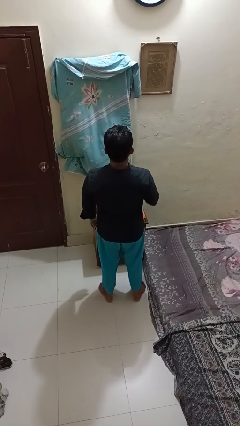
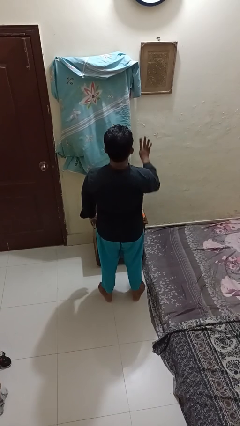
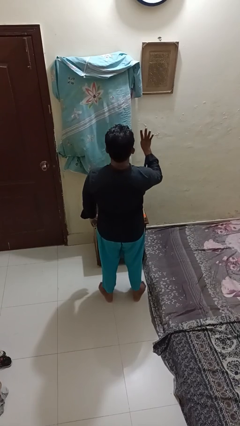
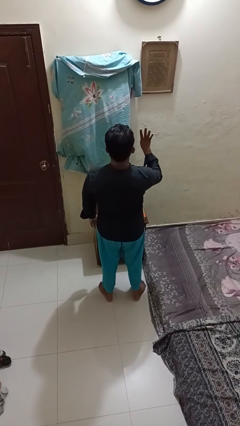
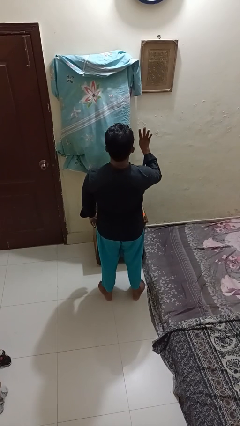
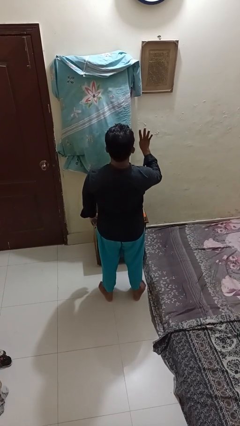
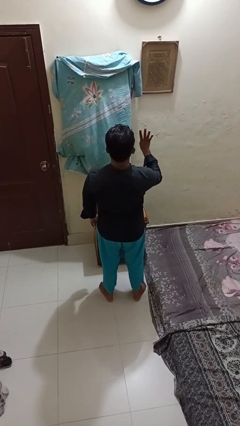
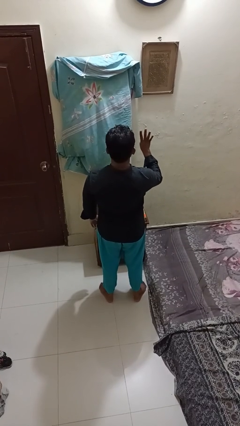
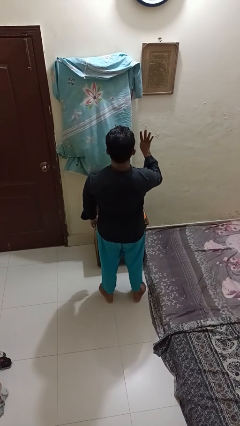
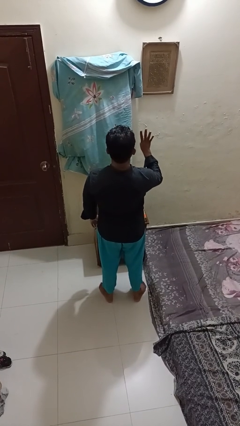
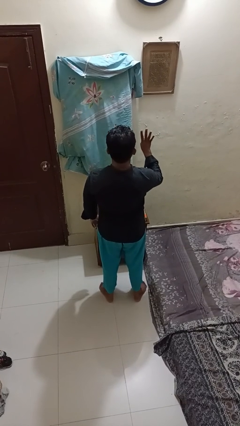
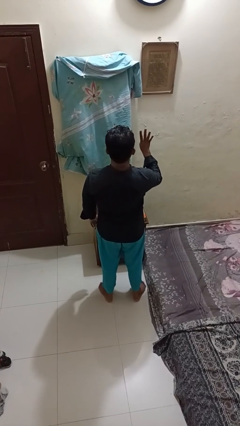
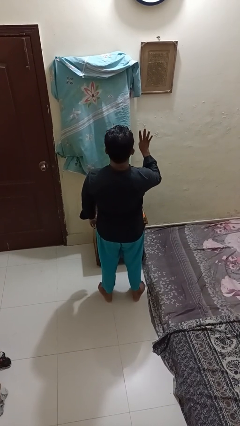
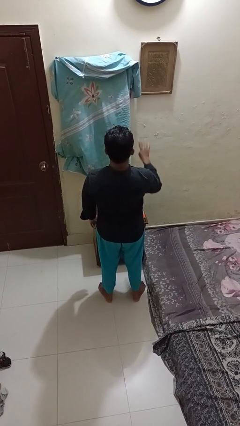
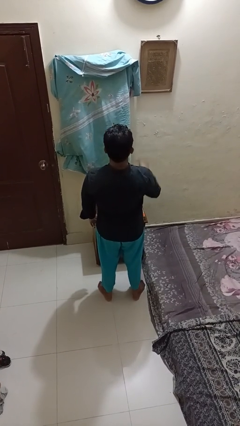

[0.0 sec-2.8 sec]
person gestures number four

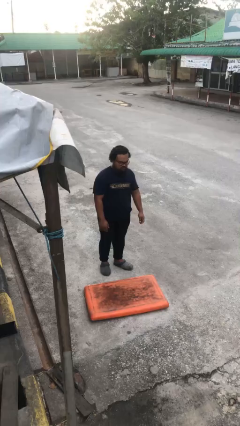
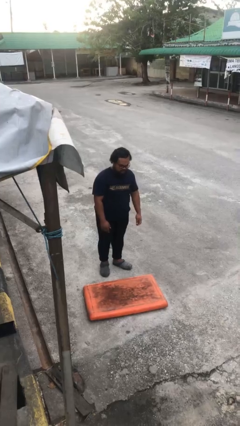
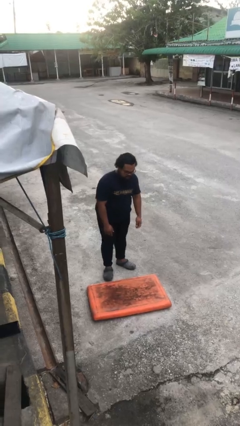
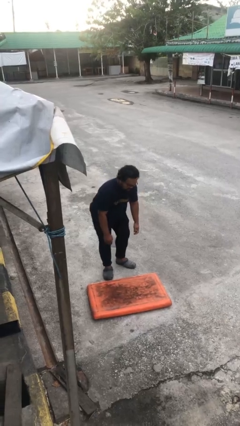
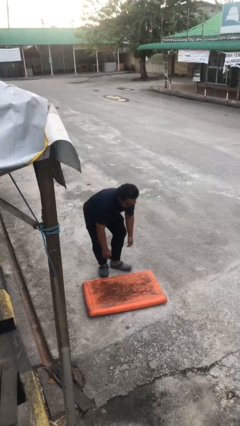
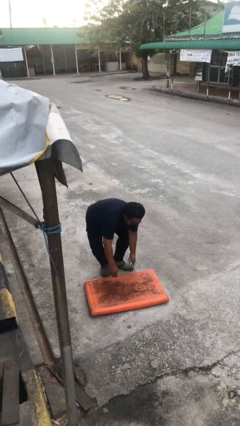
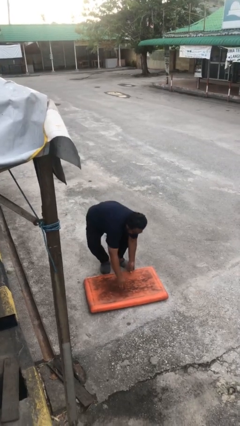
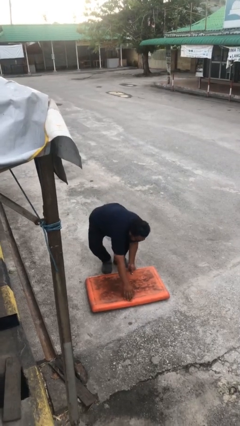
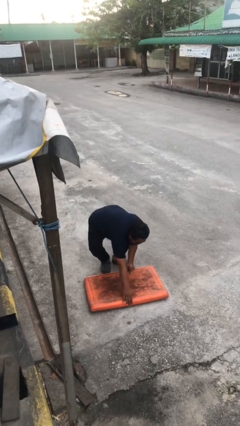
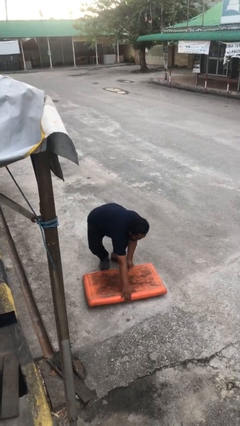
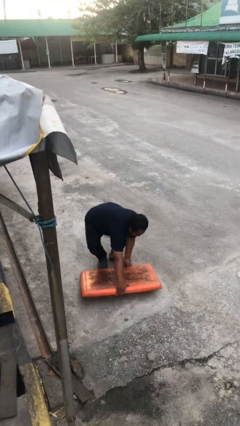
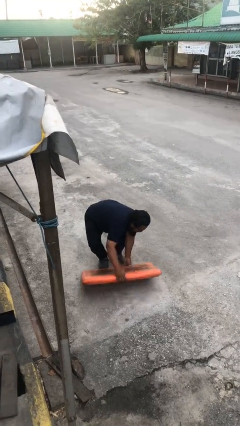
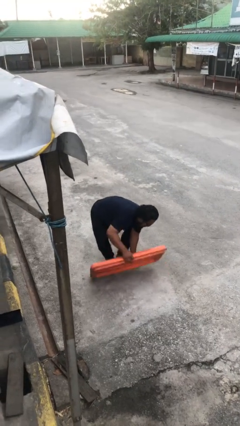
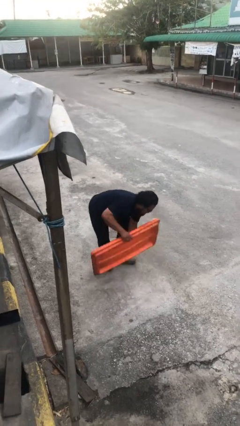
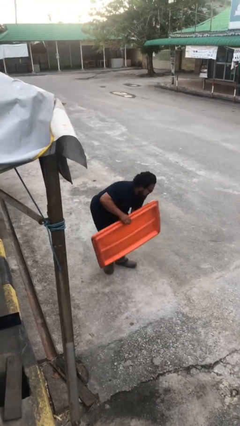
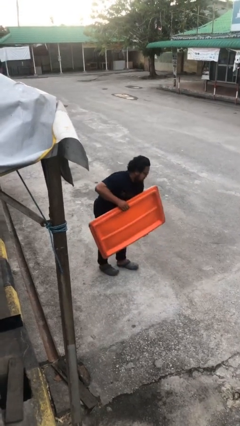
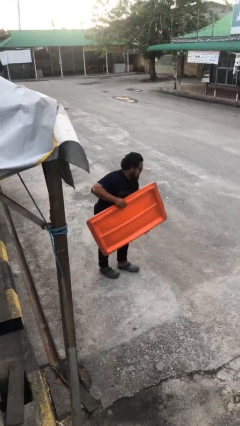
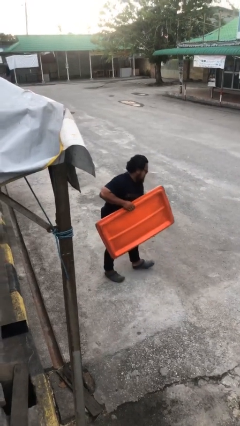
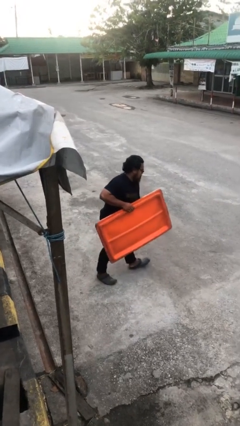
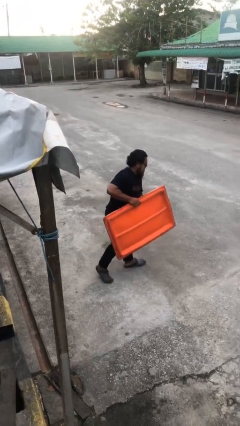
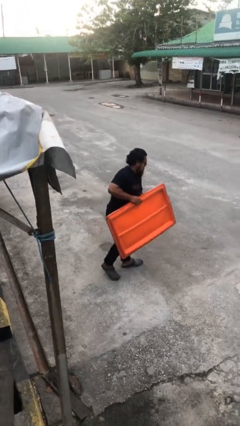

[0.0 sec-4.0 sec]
person picks up object from floor

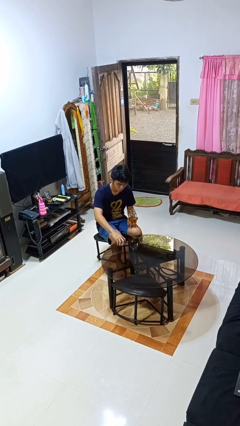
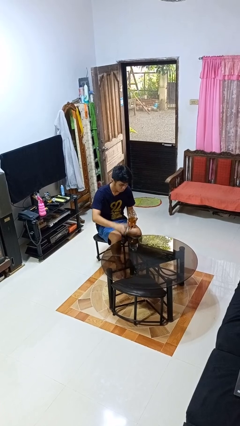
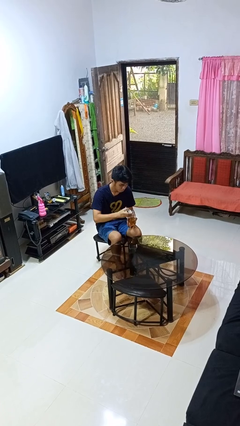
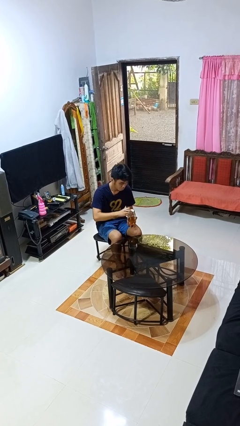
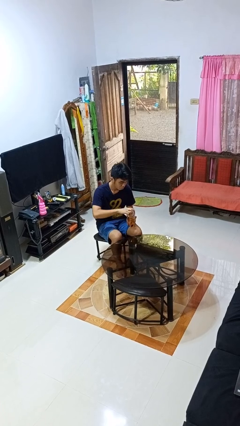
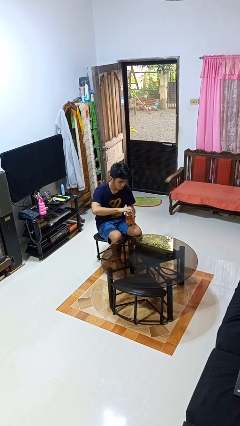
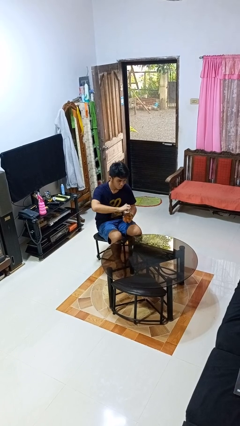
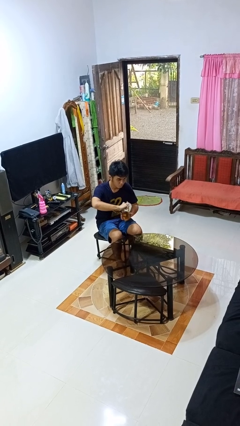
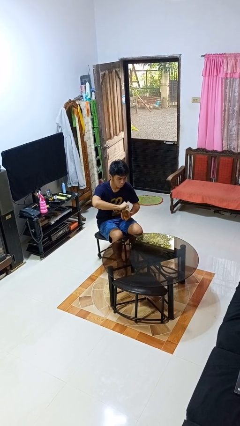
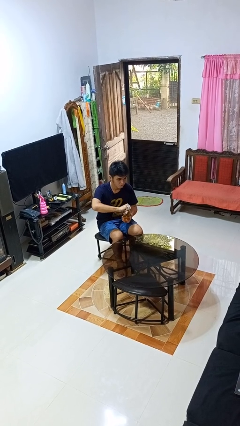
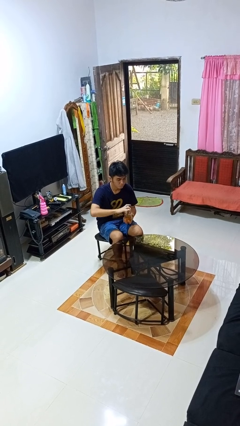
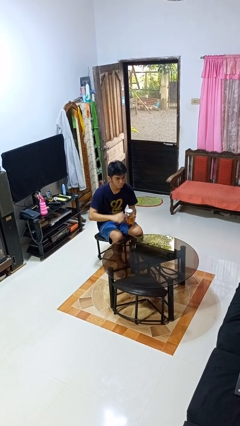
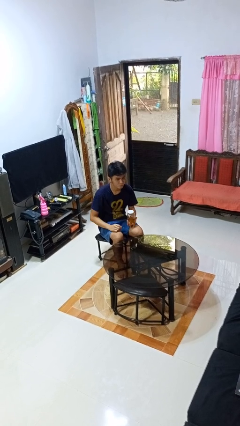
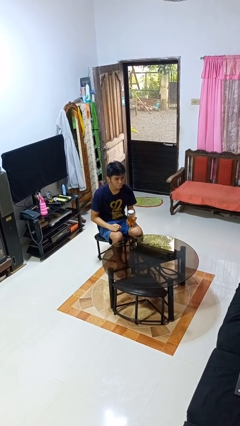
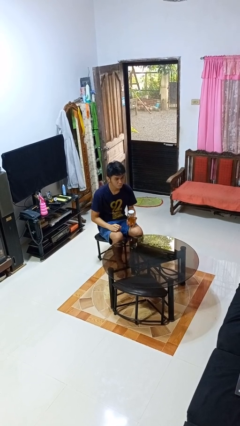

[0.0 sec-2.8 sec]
person closes jar

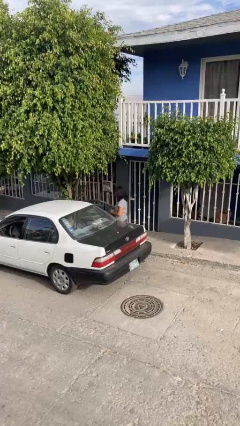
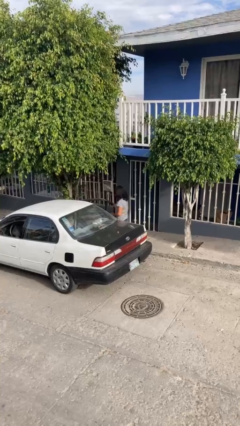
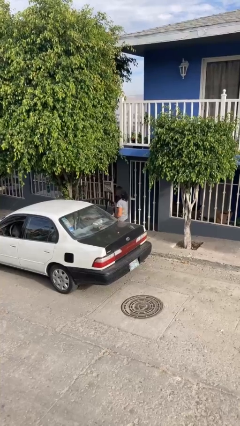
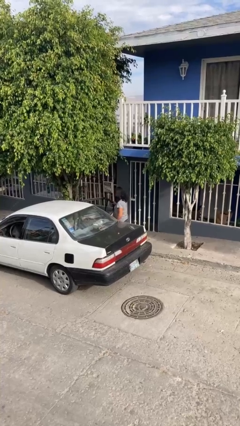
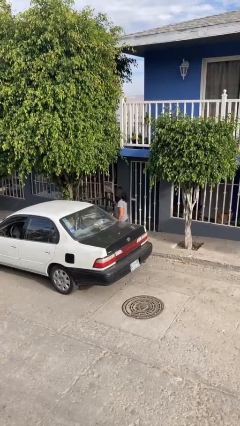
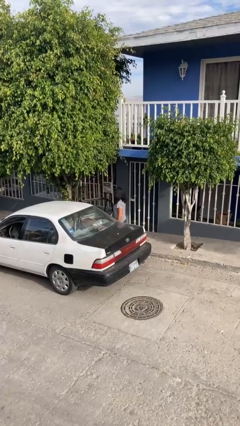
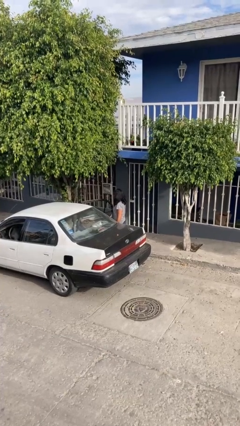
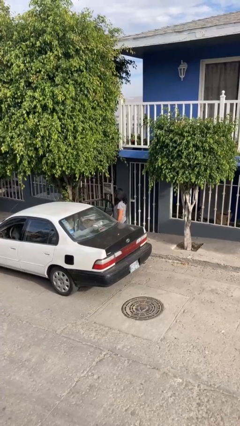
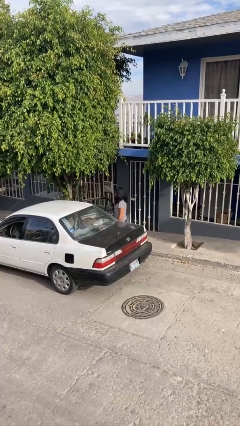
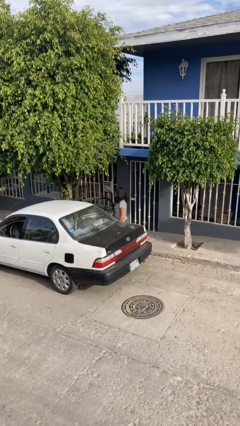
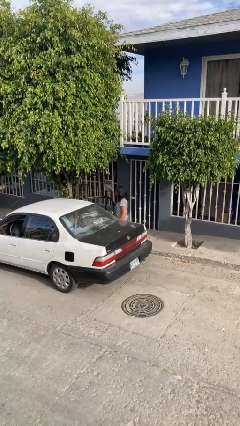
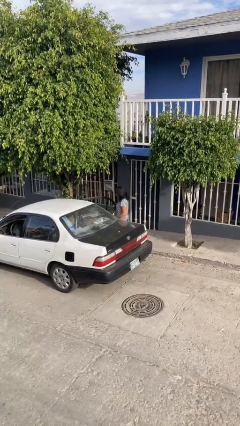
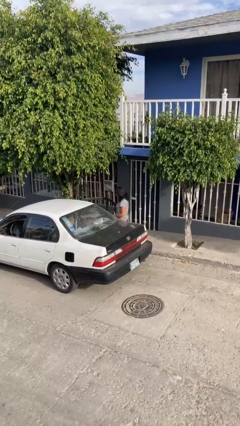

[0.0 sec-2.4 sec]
person opens car door

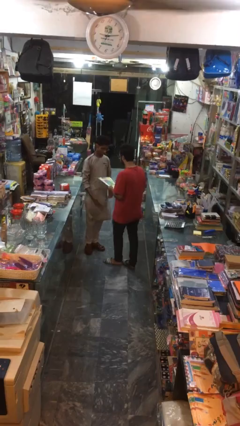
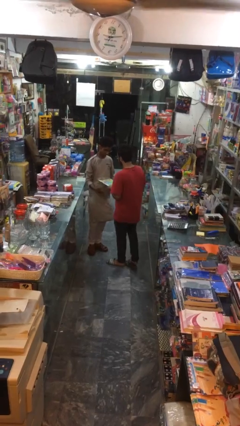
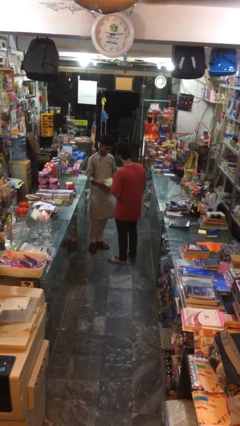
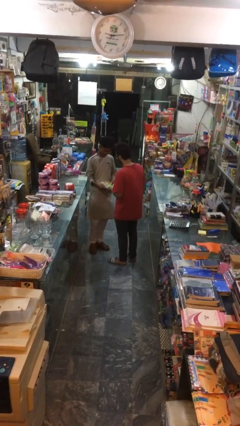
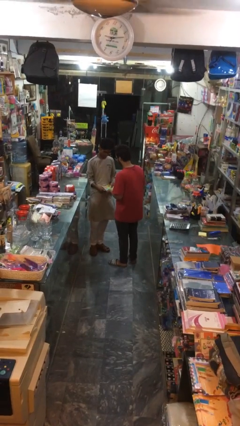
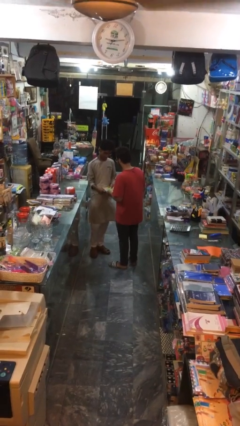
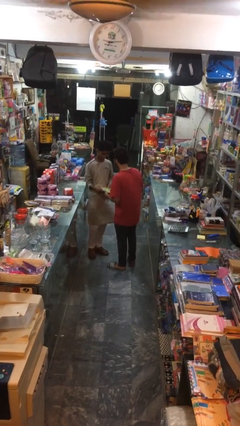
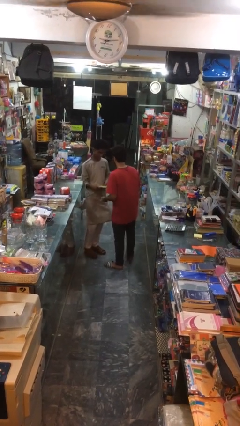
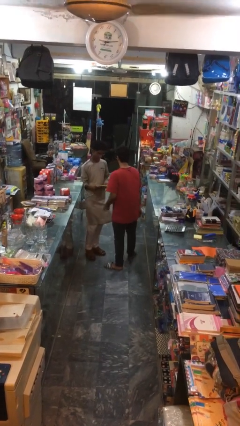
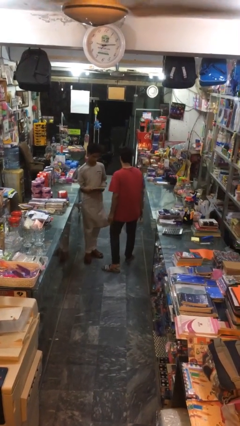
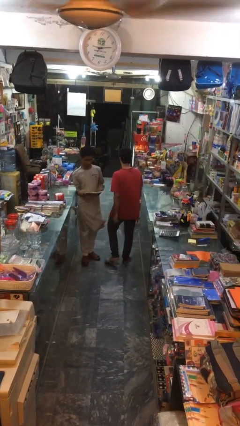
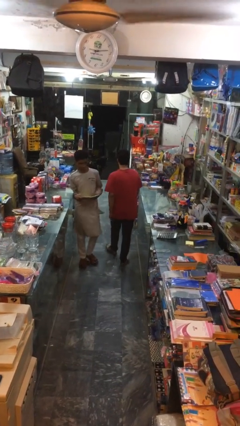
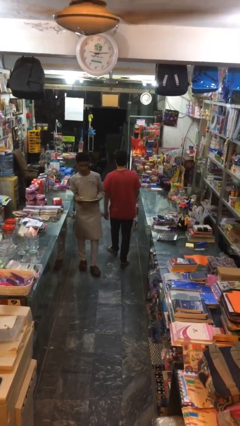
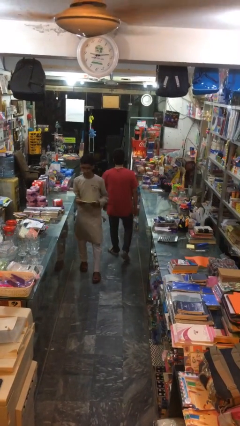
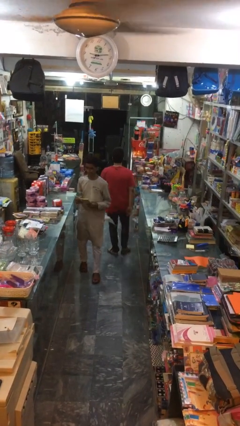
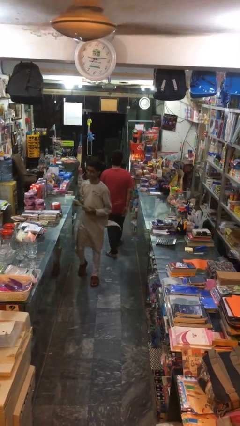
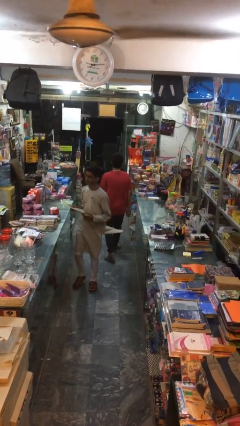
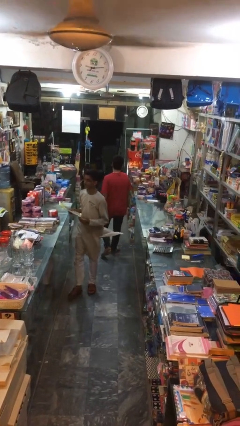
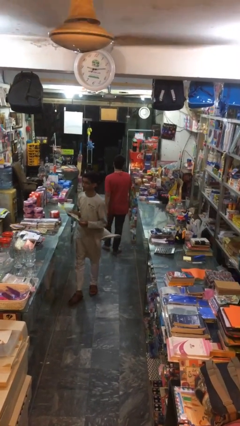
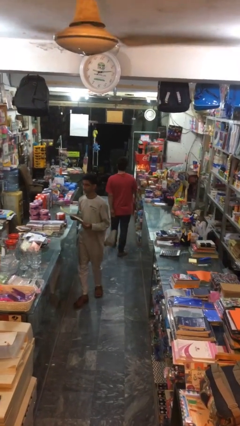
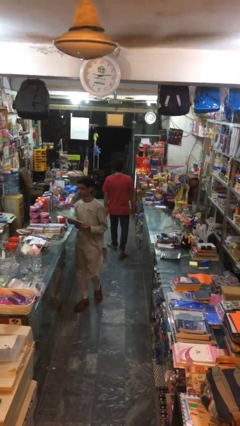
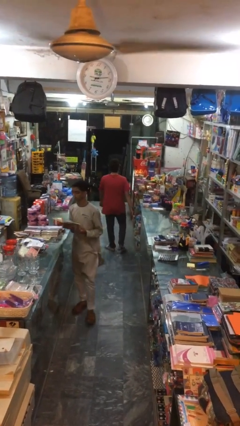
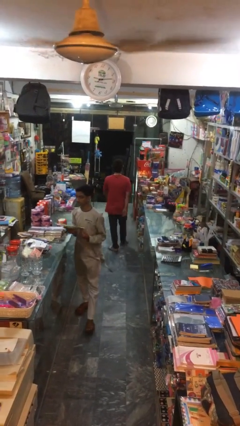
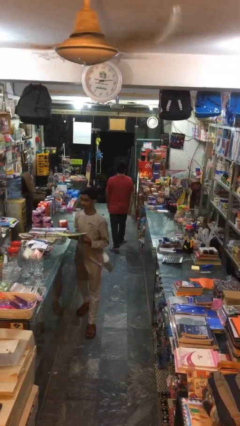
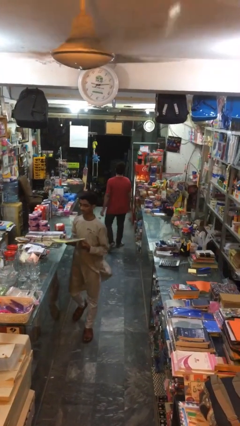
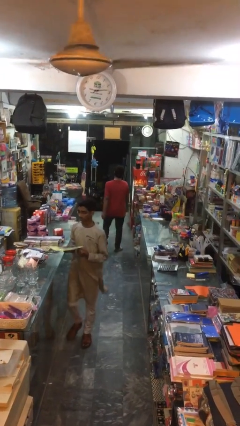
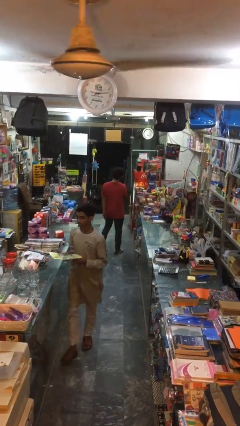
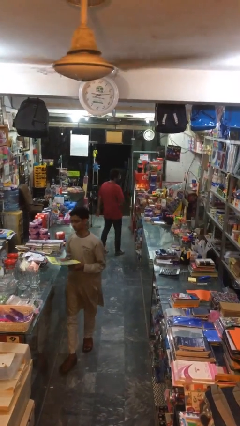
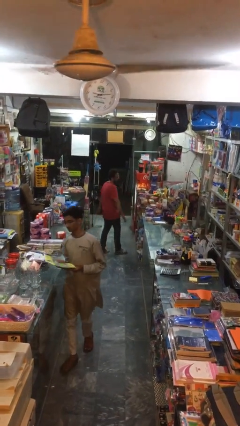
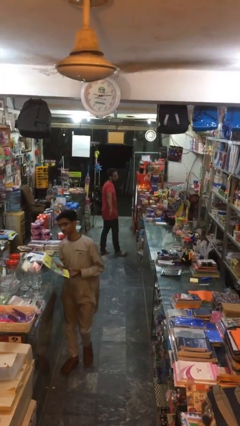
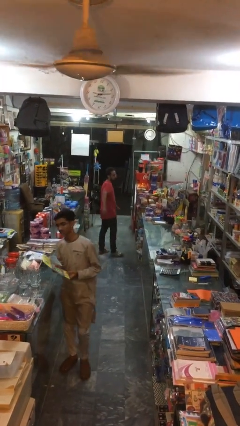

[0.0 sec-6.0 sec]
person transfers object to person
